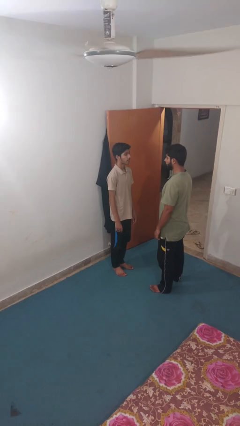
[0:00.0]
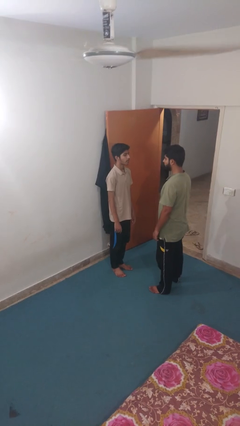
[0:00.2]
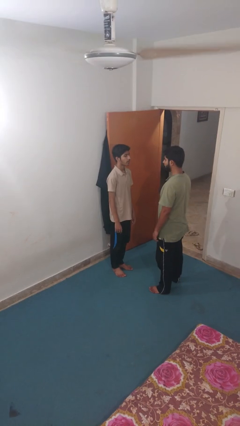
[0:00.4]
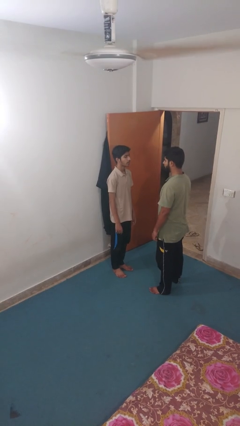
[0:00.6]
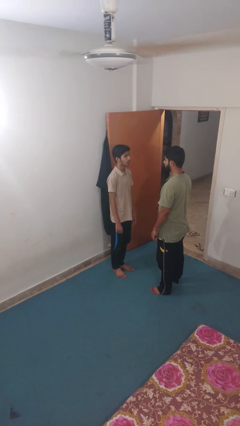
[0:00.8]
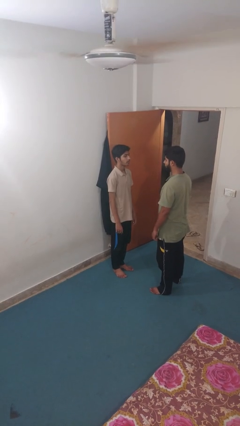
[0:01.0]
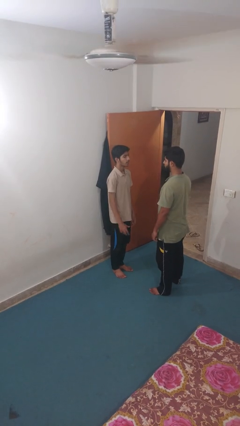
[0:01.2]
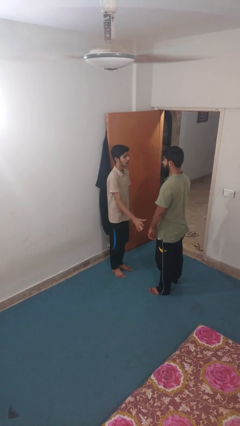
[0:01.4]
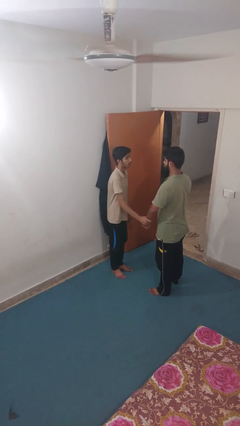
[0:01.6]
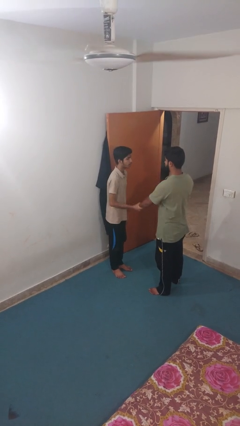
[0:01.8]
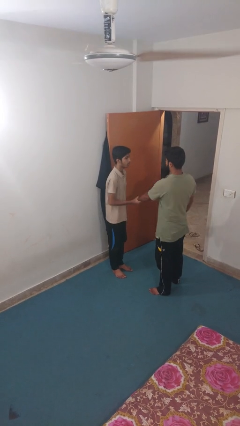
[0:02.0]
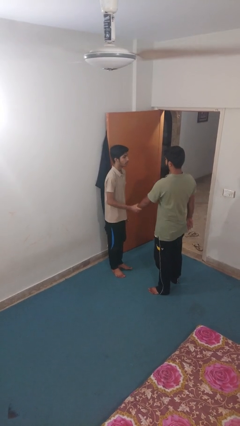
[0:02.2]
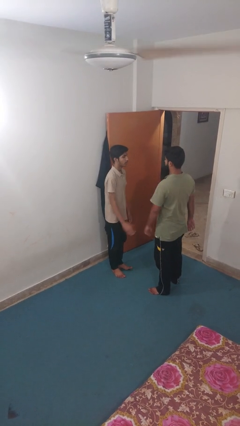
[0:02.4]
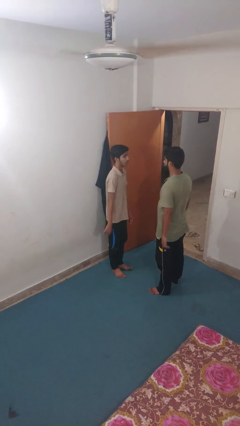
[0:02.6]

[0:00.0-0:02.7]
person grabs person by forearm

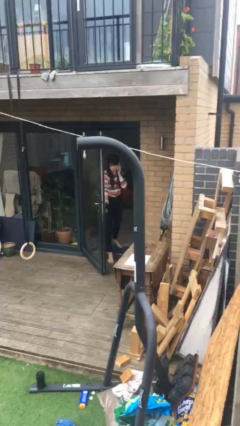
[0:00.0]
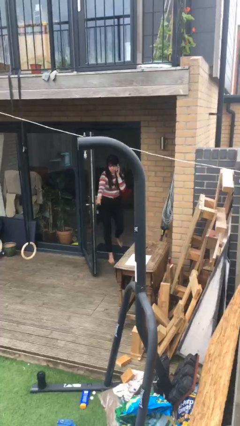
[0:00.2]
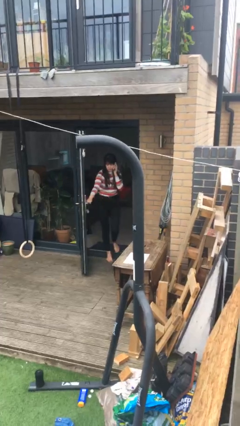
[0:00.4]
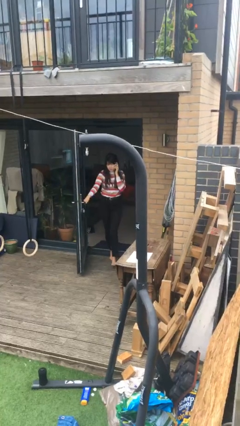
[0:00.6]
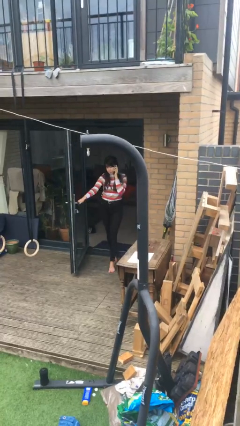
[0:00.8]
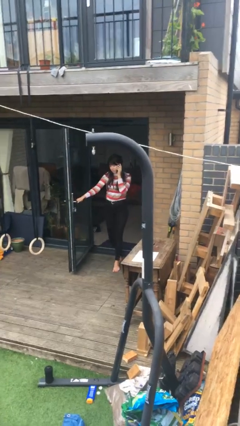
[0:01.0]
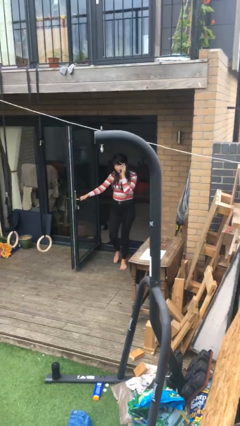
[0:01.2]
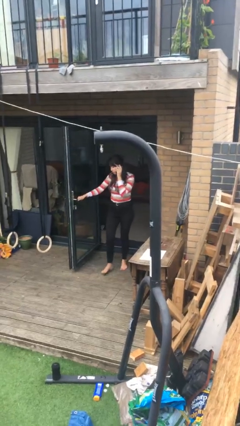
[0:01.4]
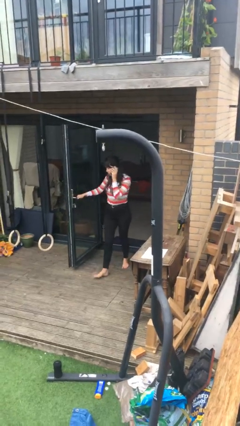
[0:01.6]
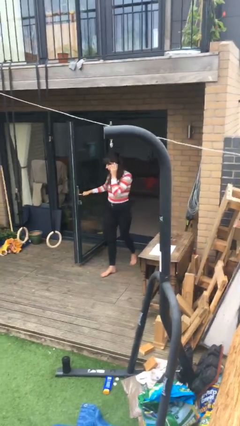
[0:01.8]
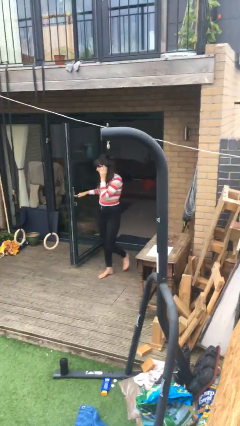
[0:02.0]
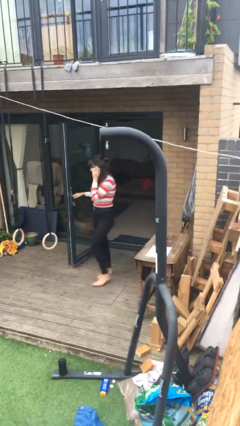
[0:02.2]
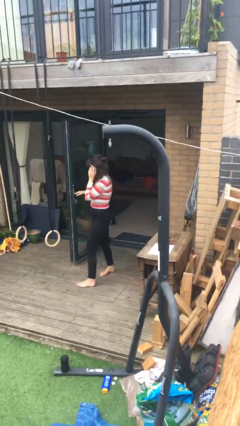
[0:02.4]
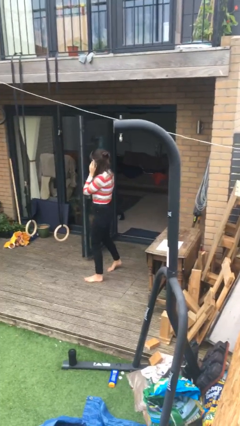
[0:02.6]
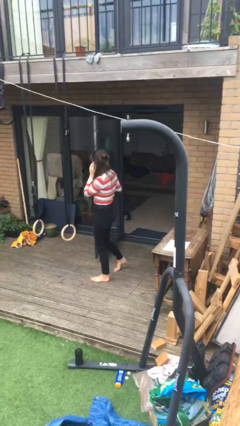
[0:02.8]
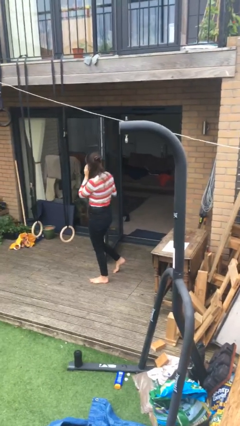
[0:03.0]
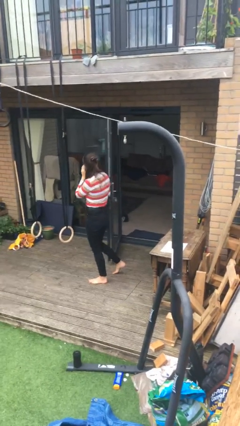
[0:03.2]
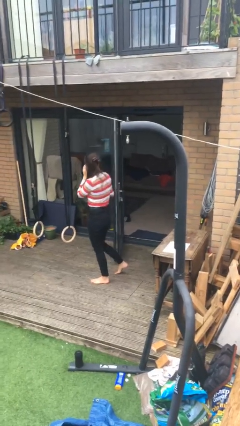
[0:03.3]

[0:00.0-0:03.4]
person enters scene through structure

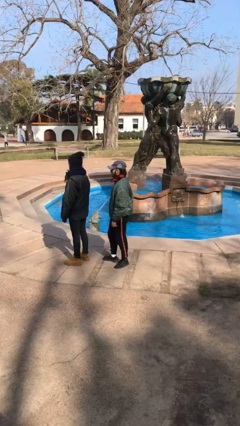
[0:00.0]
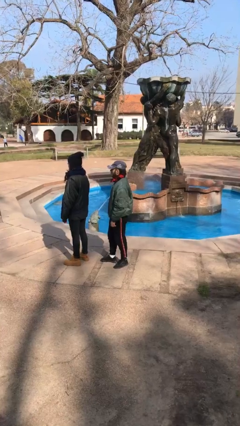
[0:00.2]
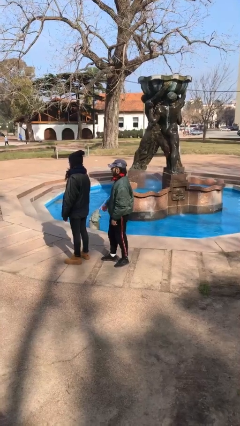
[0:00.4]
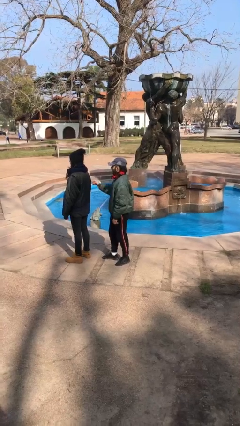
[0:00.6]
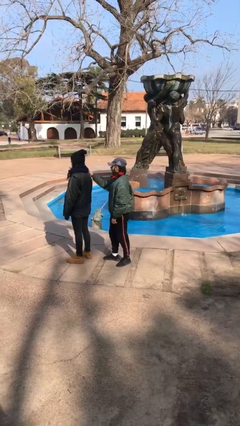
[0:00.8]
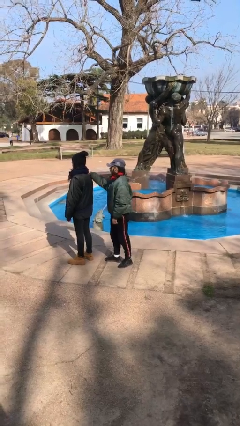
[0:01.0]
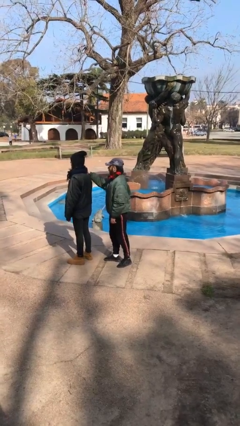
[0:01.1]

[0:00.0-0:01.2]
person grabs person by shoulder

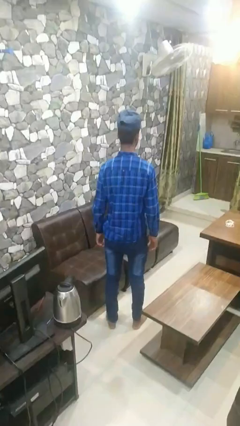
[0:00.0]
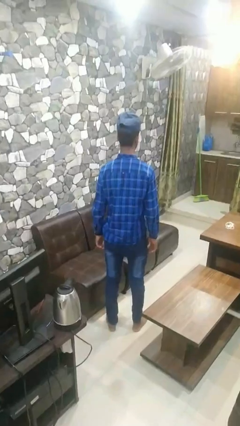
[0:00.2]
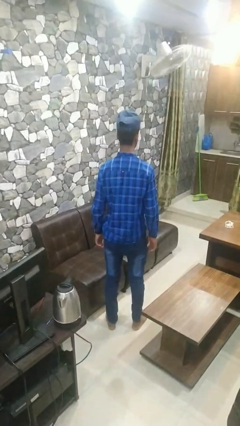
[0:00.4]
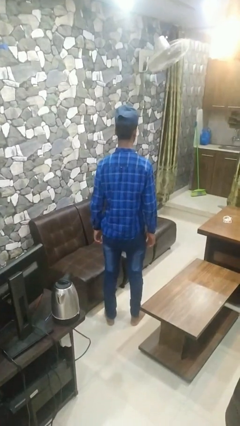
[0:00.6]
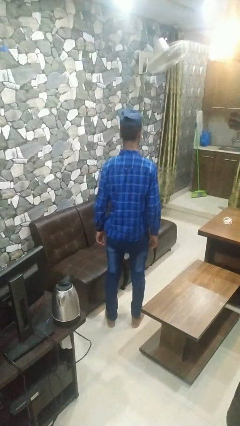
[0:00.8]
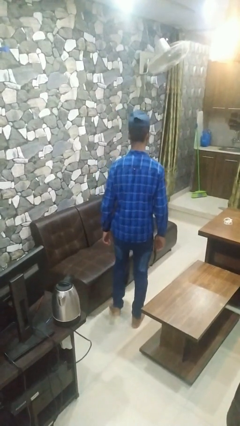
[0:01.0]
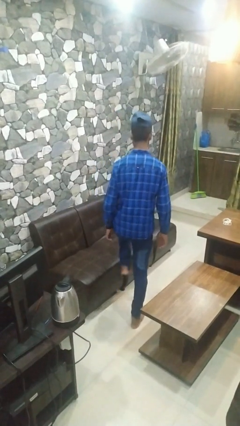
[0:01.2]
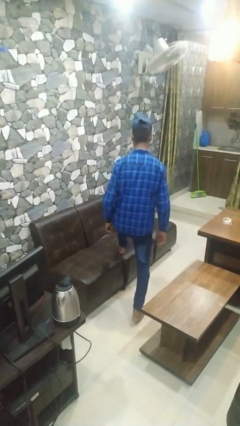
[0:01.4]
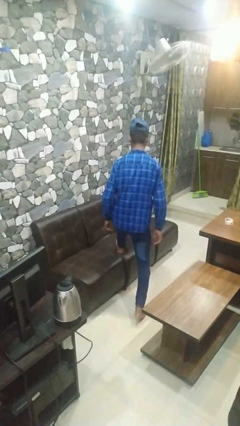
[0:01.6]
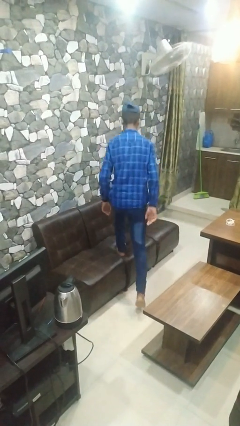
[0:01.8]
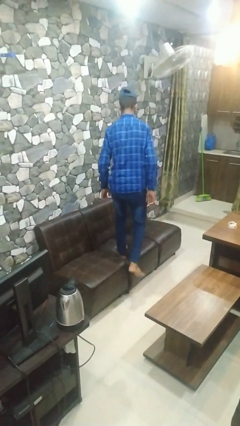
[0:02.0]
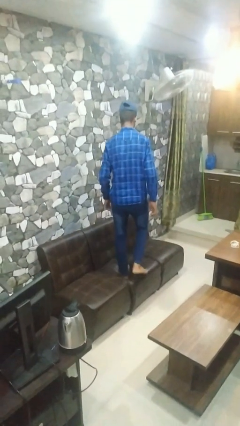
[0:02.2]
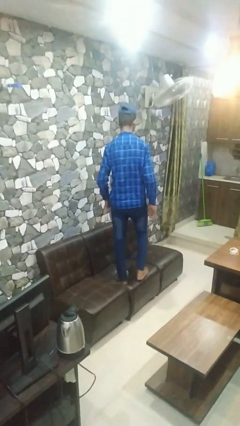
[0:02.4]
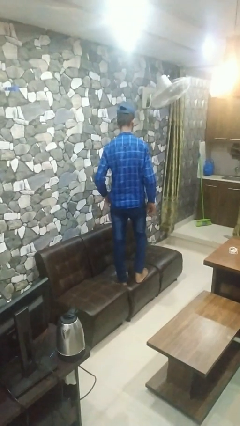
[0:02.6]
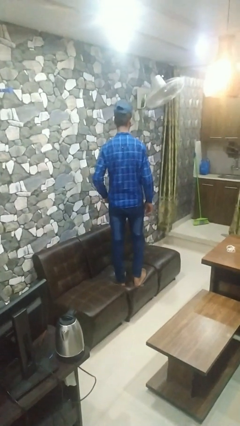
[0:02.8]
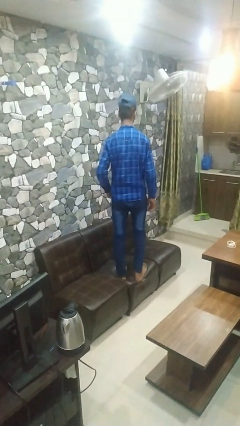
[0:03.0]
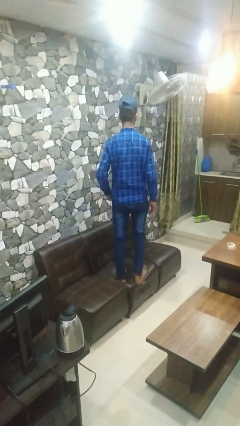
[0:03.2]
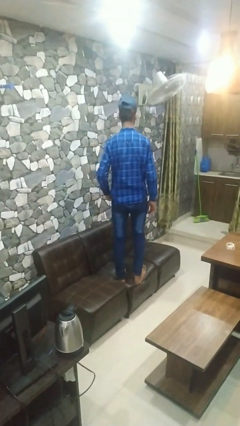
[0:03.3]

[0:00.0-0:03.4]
person climbs on couch

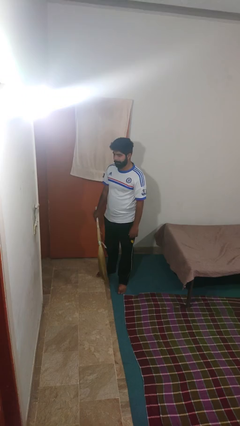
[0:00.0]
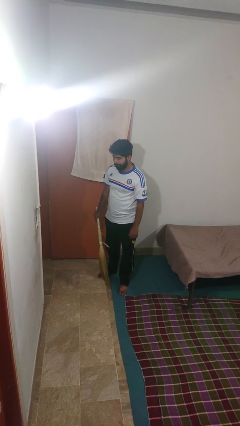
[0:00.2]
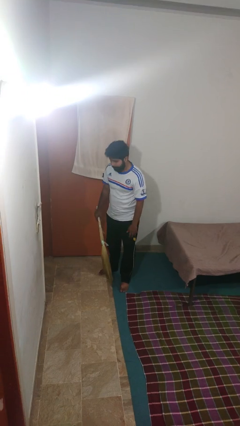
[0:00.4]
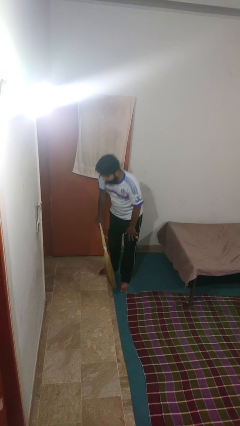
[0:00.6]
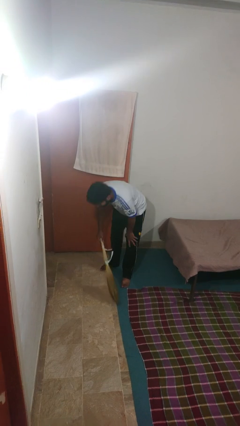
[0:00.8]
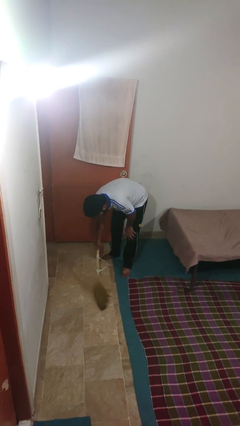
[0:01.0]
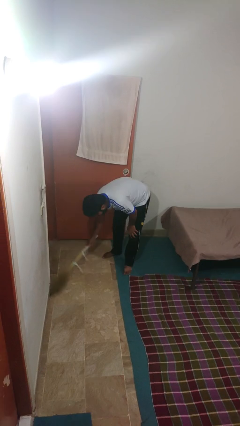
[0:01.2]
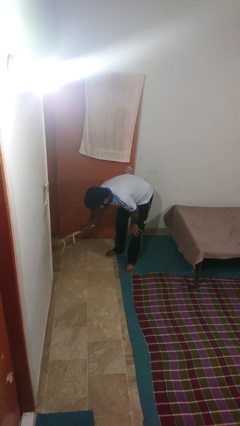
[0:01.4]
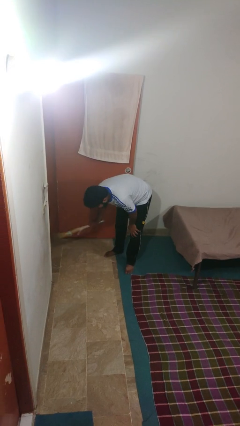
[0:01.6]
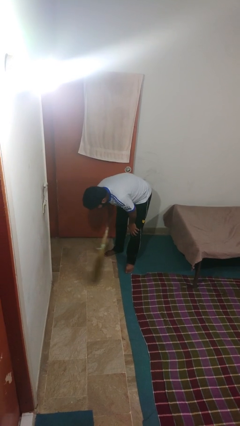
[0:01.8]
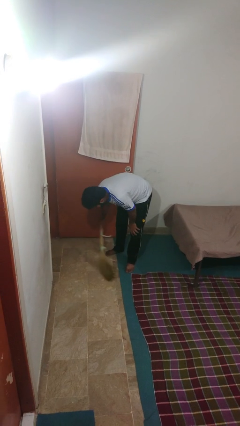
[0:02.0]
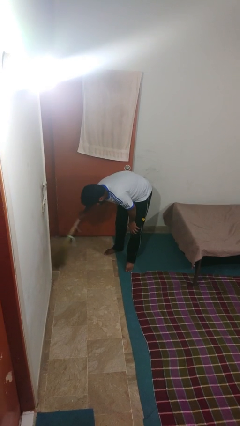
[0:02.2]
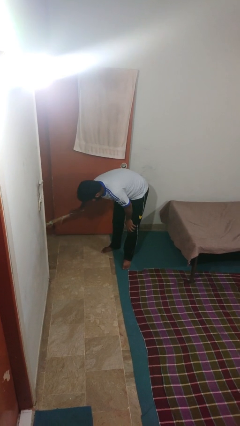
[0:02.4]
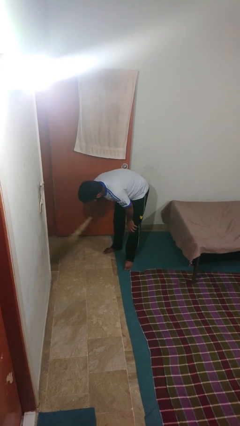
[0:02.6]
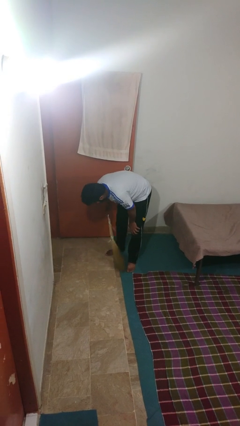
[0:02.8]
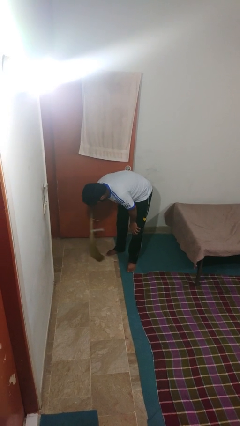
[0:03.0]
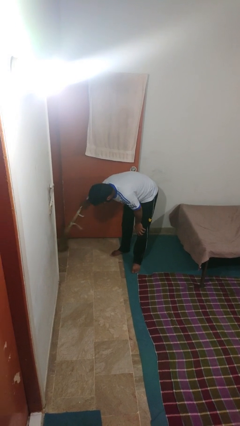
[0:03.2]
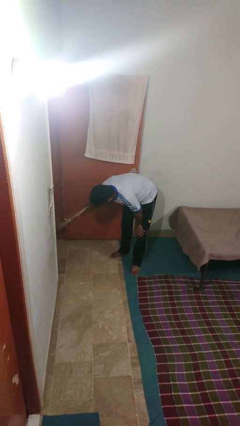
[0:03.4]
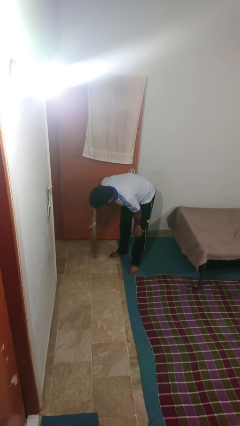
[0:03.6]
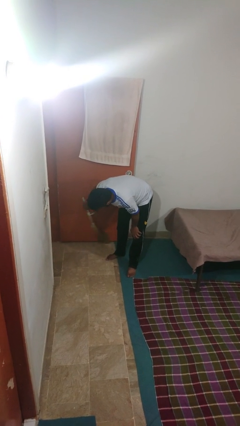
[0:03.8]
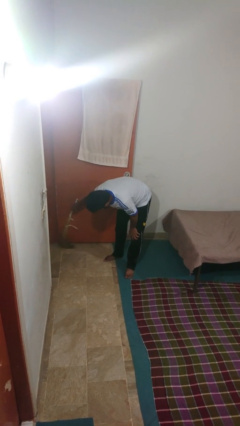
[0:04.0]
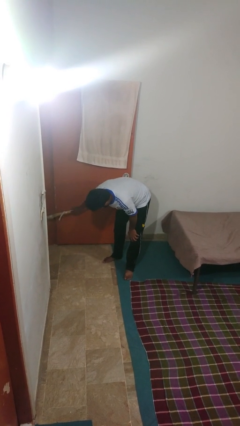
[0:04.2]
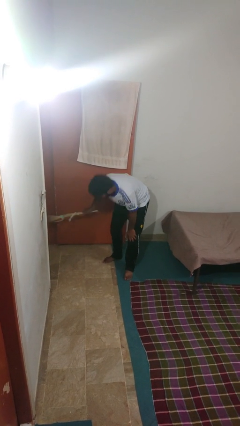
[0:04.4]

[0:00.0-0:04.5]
person sweeps floor

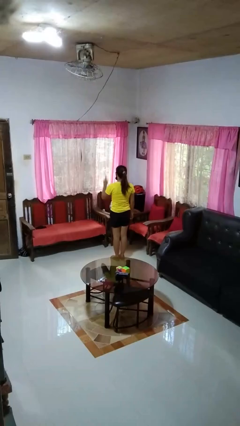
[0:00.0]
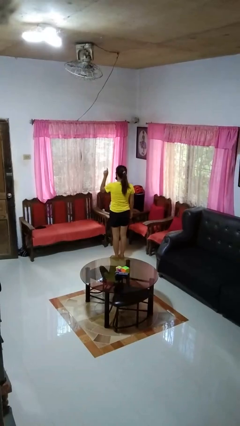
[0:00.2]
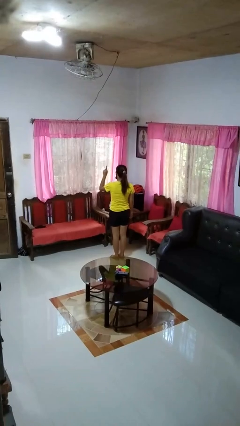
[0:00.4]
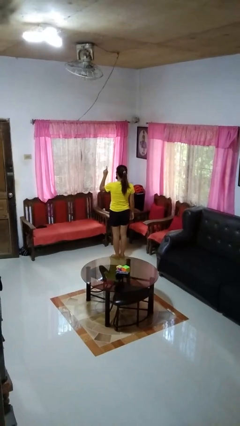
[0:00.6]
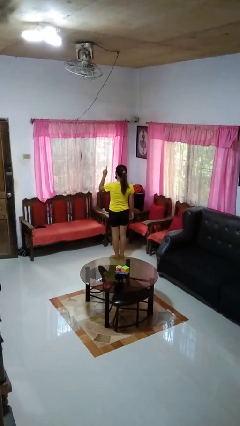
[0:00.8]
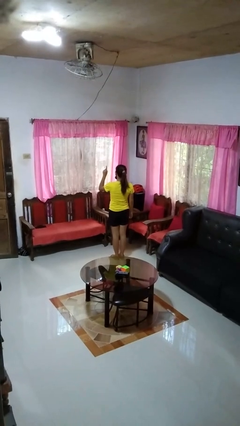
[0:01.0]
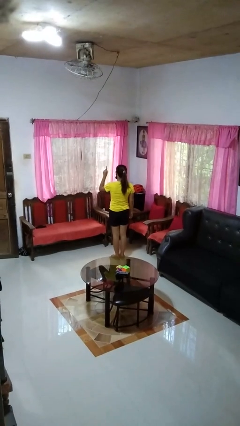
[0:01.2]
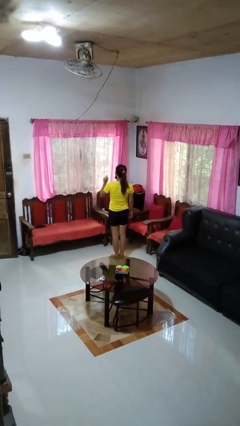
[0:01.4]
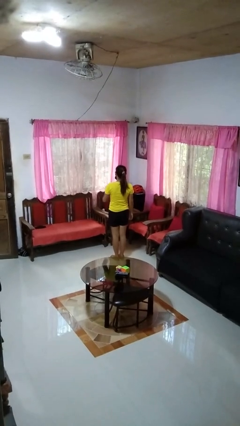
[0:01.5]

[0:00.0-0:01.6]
person gestures number one

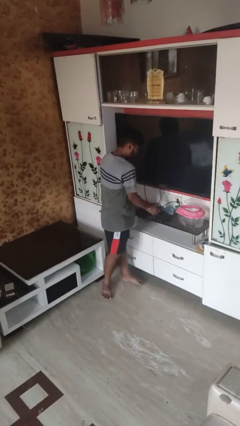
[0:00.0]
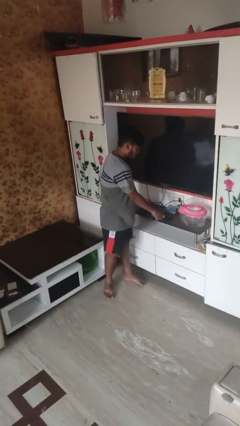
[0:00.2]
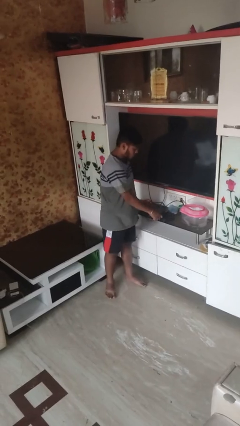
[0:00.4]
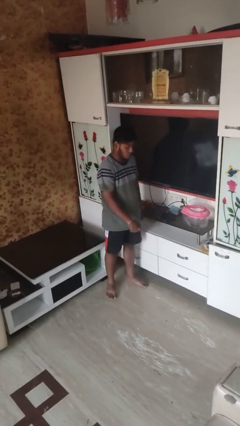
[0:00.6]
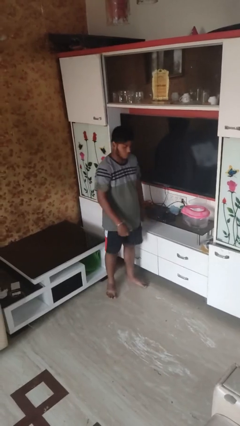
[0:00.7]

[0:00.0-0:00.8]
person unplugs from electrical socket
